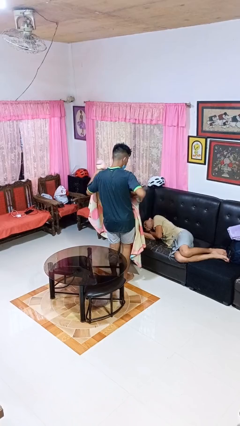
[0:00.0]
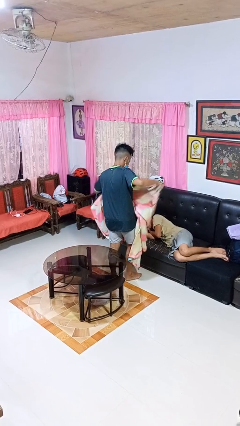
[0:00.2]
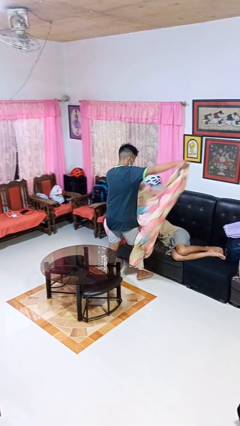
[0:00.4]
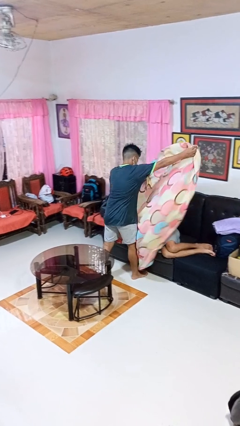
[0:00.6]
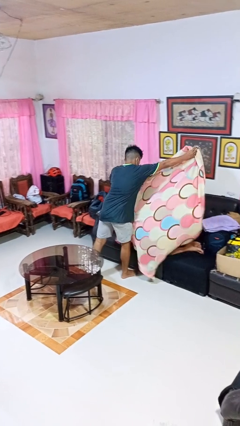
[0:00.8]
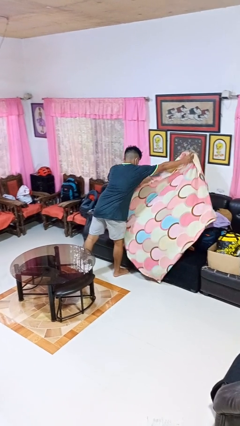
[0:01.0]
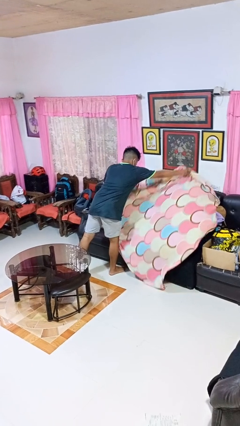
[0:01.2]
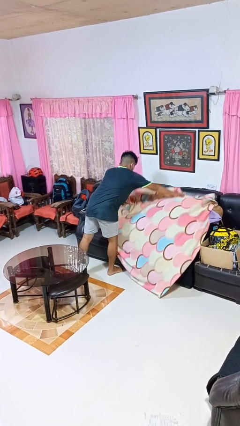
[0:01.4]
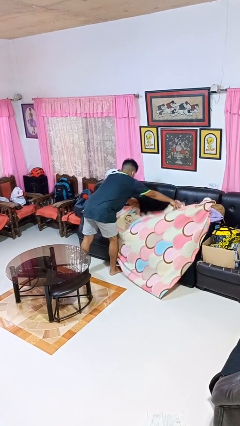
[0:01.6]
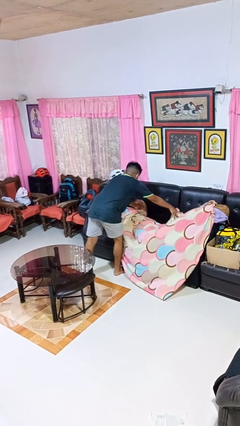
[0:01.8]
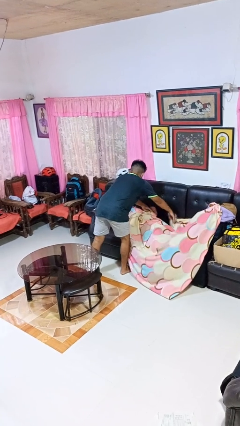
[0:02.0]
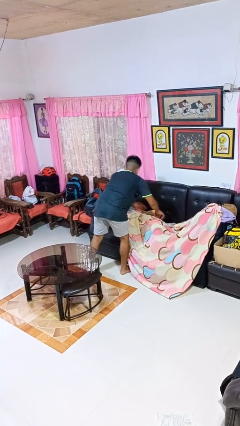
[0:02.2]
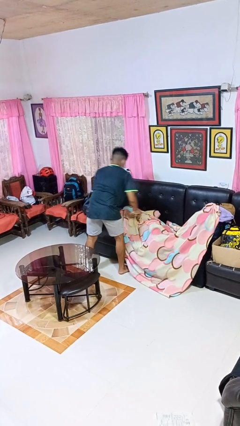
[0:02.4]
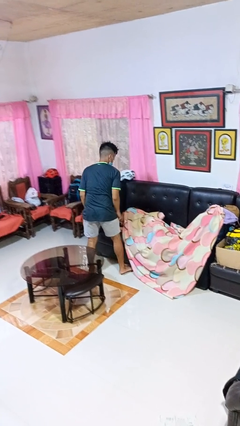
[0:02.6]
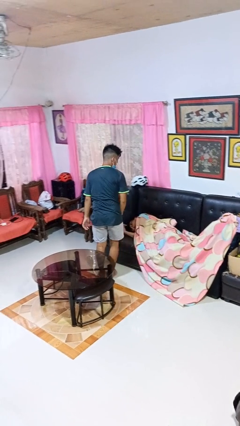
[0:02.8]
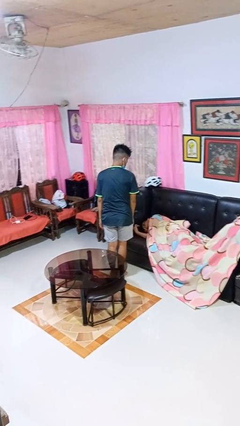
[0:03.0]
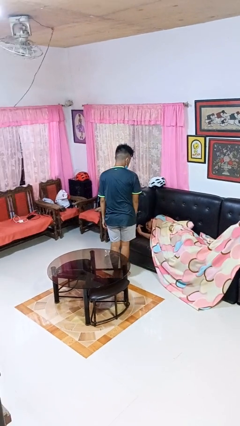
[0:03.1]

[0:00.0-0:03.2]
person covers friend with blanket

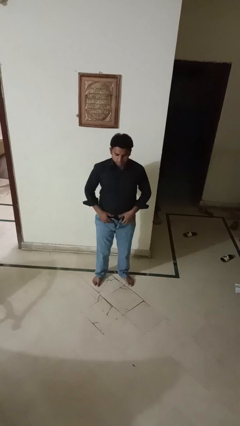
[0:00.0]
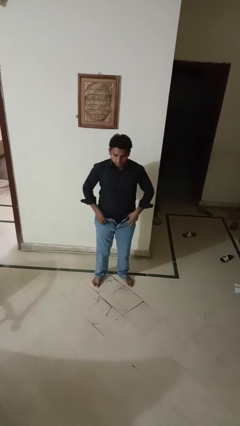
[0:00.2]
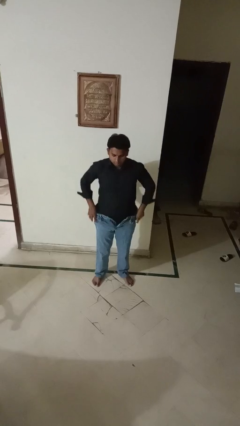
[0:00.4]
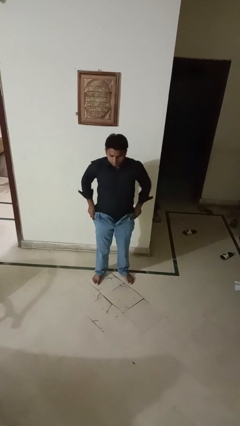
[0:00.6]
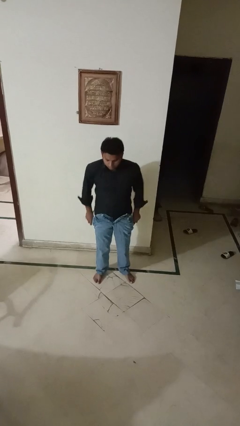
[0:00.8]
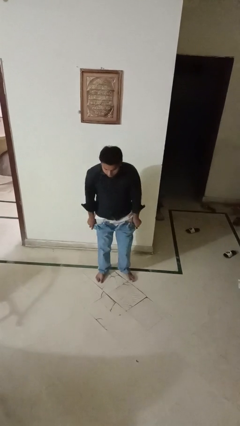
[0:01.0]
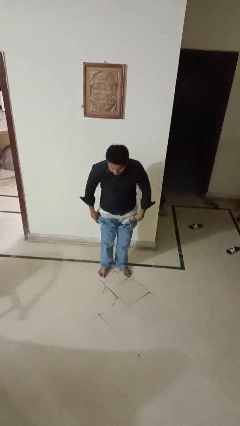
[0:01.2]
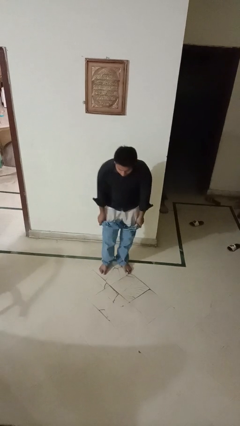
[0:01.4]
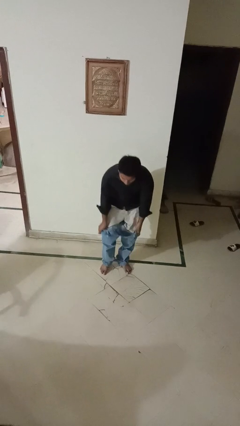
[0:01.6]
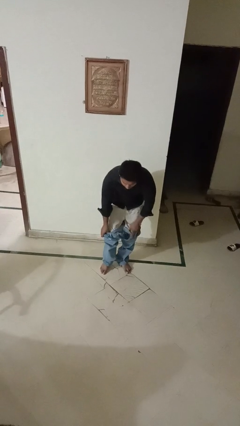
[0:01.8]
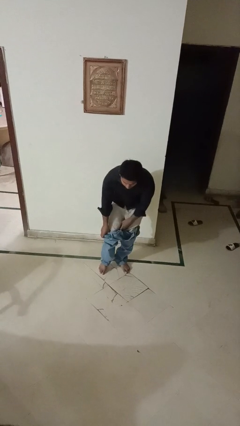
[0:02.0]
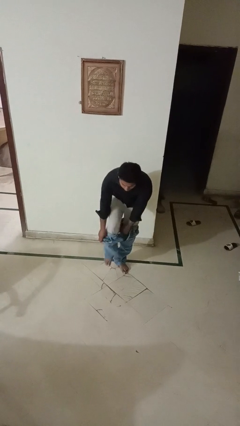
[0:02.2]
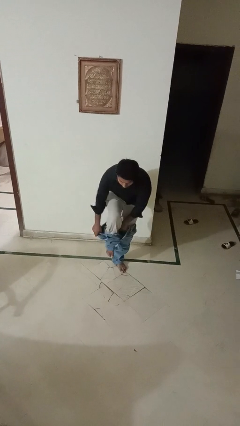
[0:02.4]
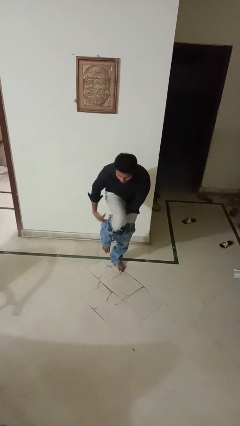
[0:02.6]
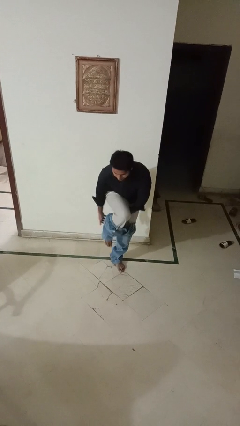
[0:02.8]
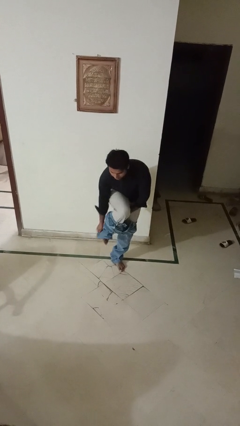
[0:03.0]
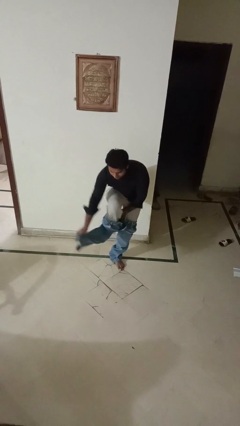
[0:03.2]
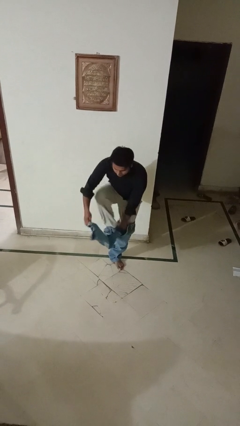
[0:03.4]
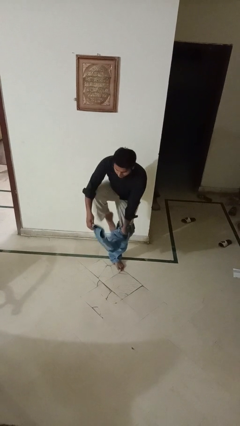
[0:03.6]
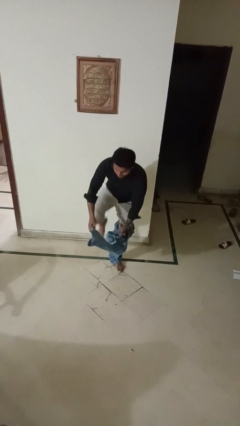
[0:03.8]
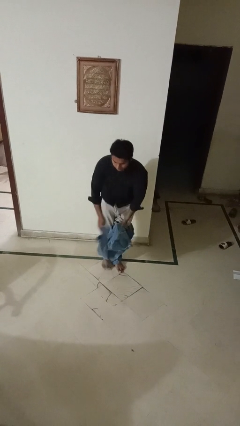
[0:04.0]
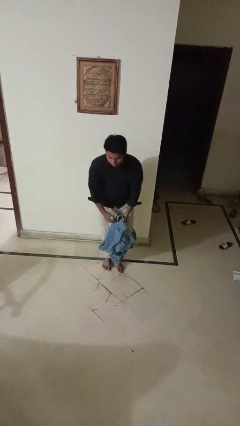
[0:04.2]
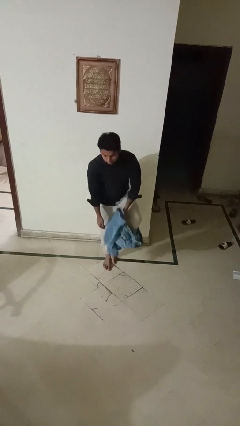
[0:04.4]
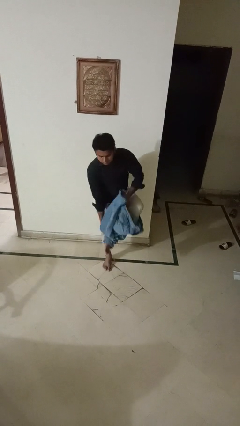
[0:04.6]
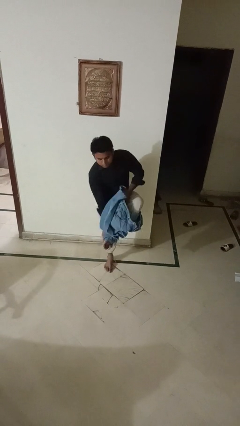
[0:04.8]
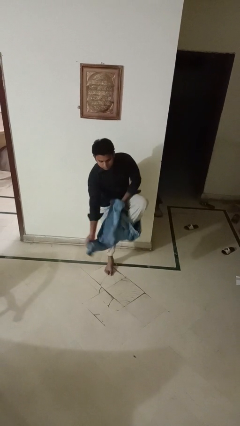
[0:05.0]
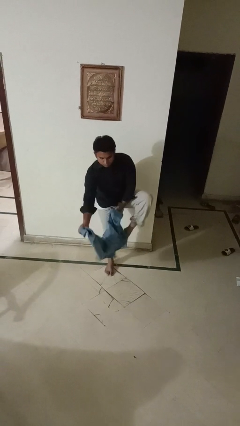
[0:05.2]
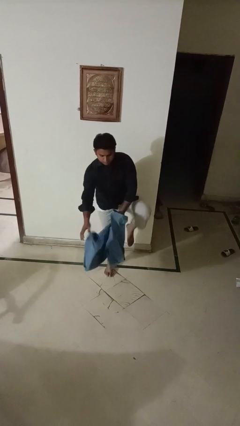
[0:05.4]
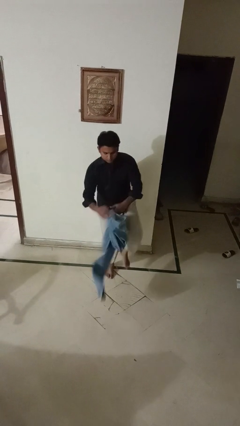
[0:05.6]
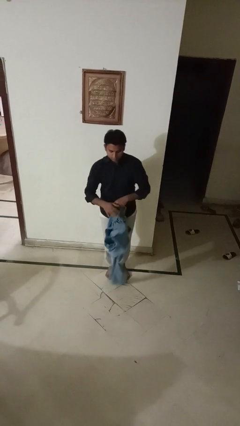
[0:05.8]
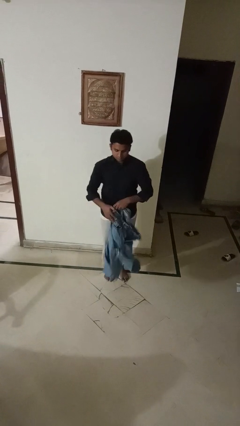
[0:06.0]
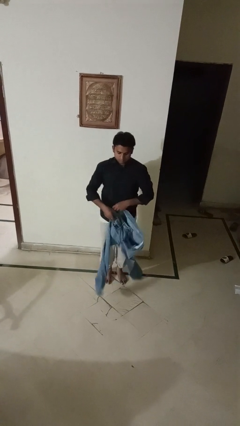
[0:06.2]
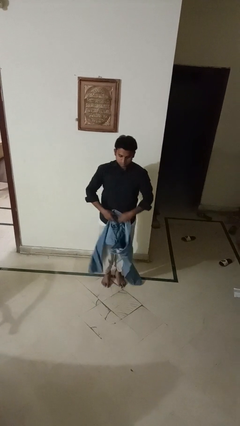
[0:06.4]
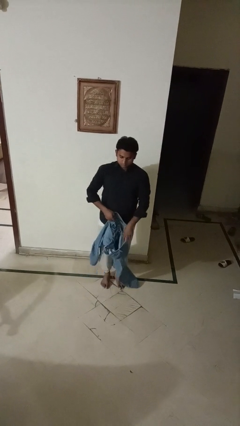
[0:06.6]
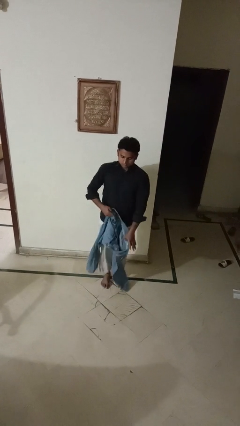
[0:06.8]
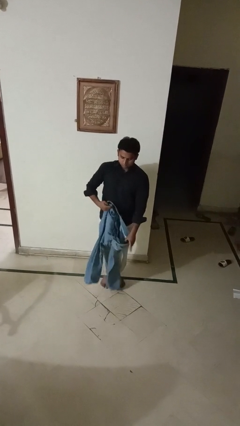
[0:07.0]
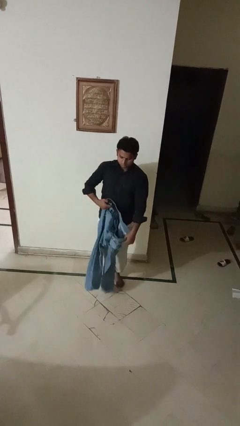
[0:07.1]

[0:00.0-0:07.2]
person takes off pants

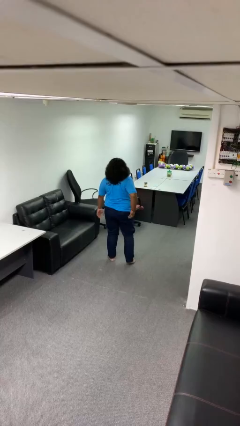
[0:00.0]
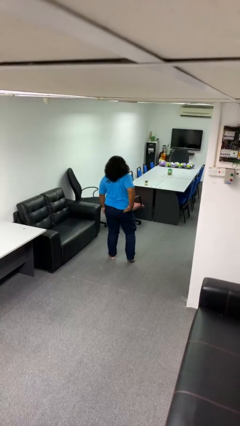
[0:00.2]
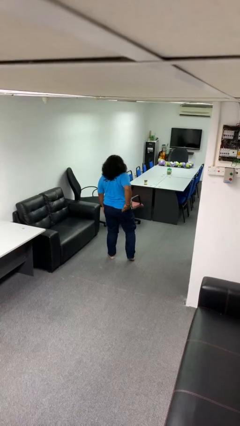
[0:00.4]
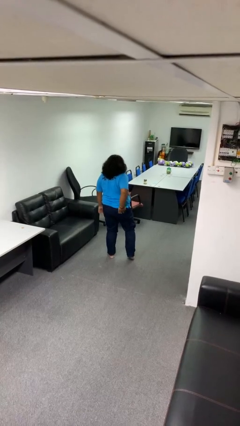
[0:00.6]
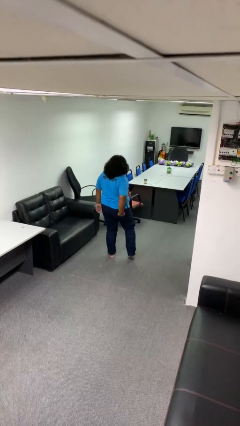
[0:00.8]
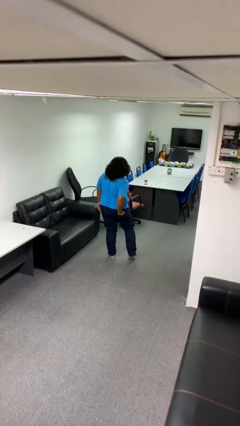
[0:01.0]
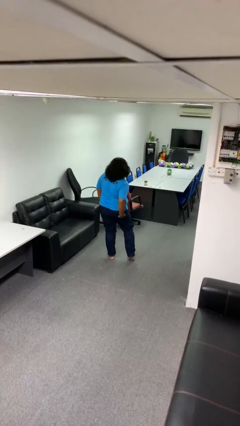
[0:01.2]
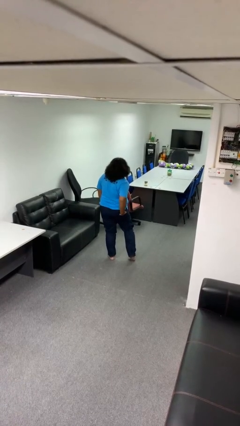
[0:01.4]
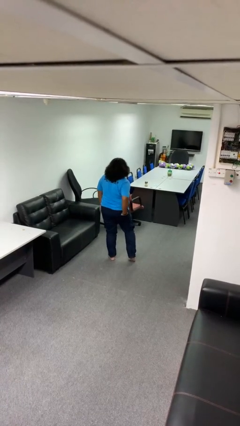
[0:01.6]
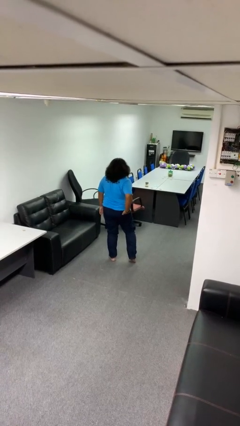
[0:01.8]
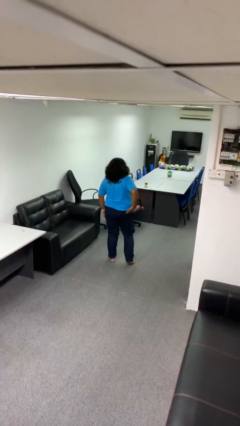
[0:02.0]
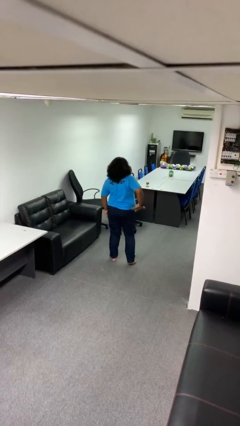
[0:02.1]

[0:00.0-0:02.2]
person puts hands in back pockets

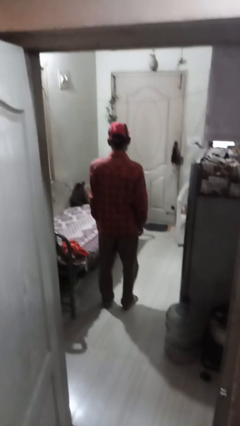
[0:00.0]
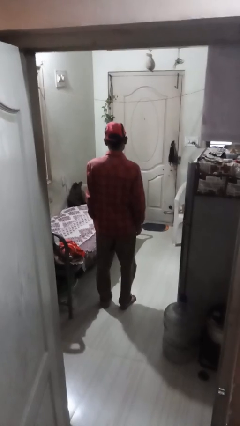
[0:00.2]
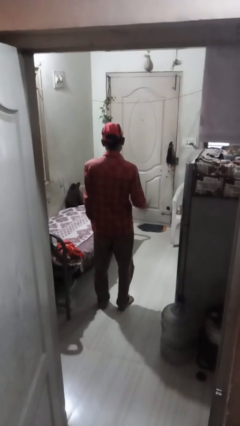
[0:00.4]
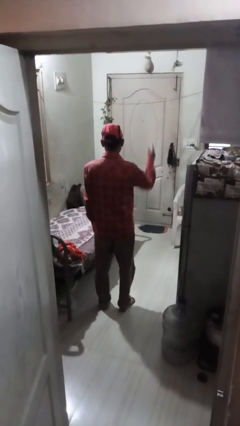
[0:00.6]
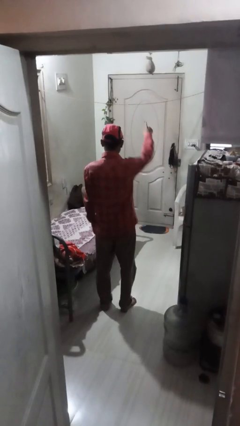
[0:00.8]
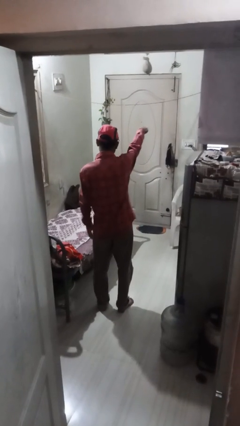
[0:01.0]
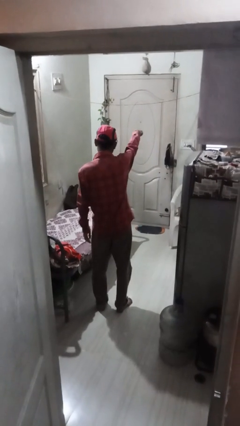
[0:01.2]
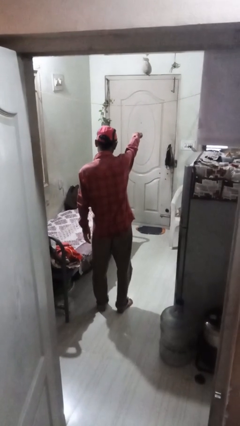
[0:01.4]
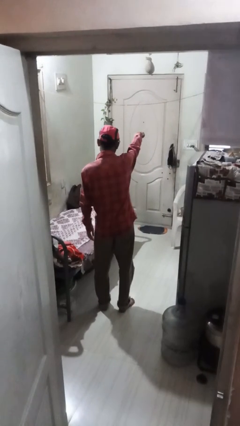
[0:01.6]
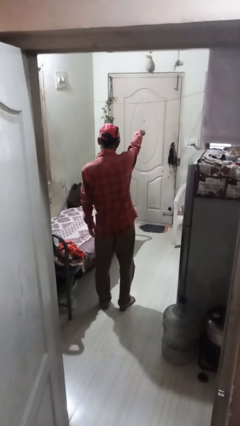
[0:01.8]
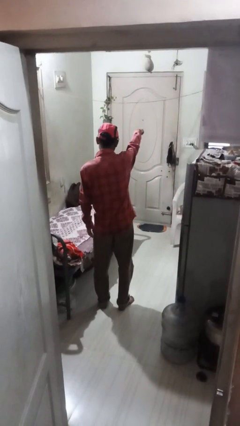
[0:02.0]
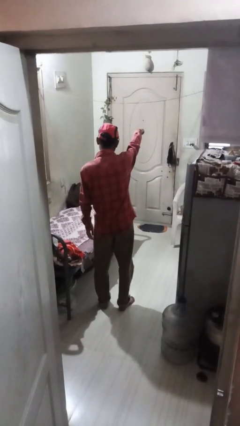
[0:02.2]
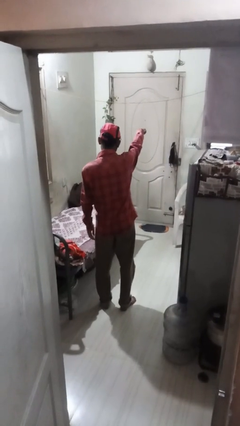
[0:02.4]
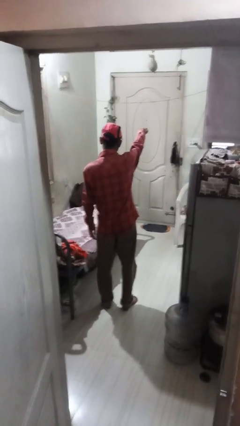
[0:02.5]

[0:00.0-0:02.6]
person points at person

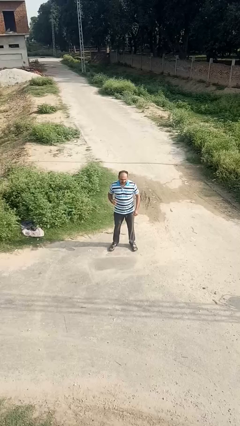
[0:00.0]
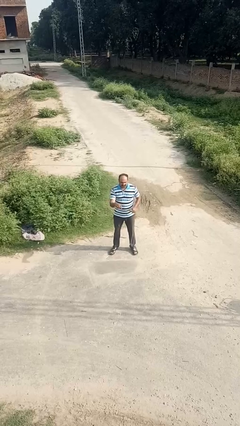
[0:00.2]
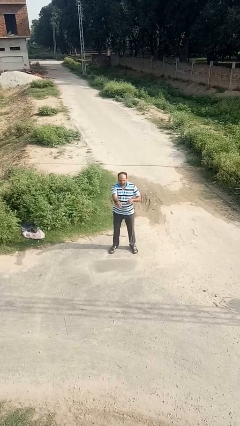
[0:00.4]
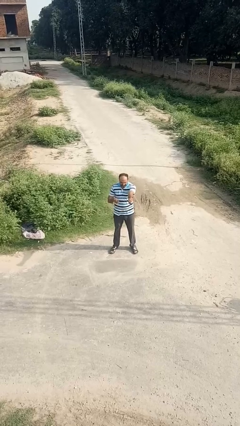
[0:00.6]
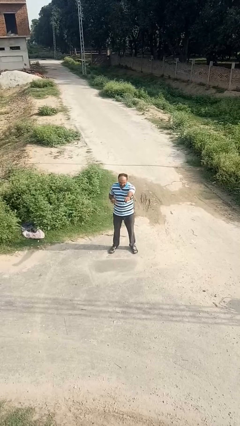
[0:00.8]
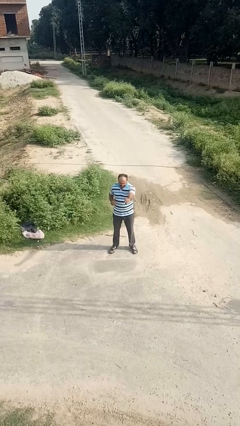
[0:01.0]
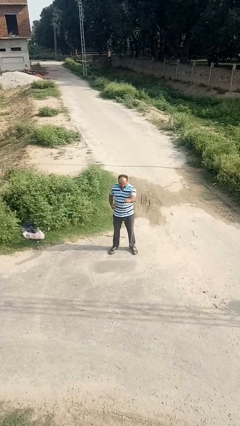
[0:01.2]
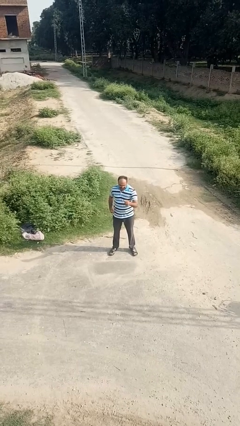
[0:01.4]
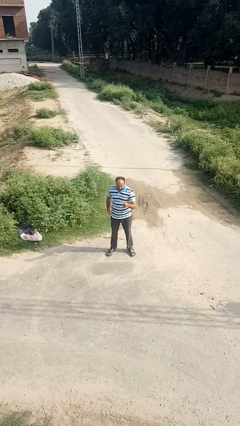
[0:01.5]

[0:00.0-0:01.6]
person punches

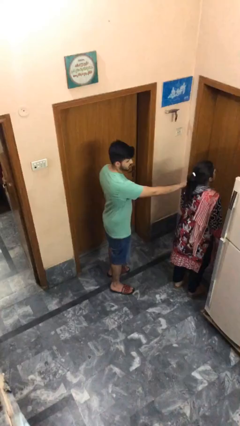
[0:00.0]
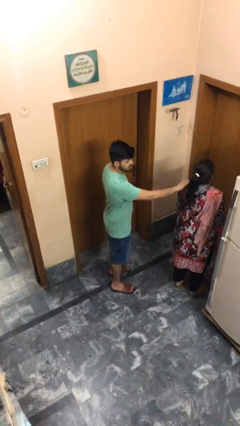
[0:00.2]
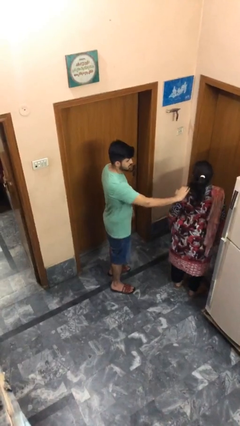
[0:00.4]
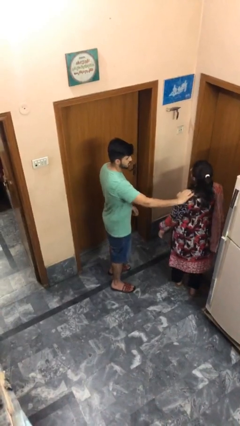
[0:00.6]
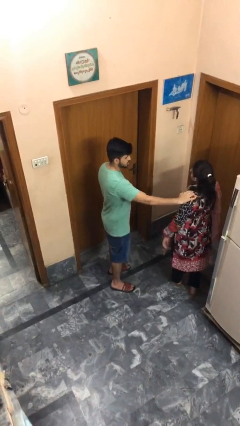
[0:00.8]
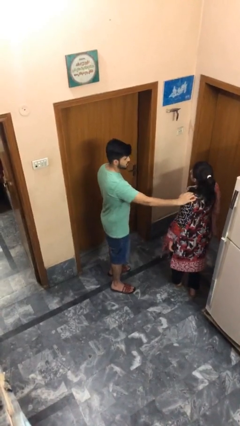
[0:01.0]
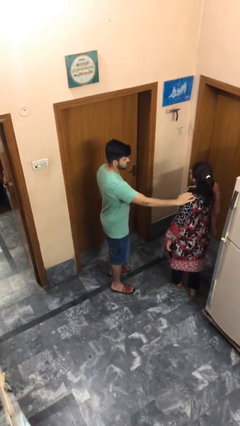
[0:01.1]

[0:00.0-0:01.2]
person spins person around
